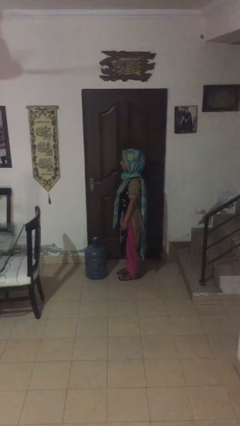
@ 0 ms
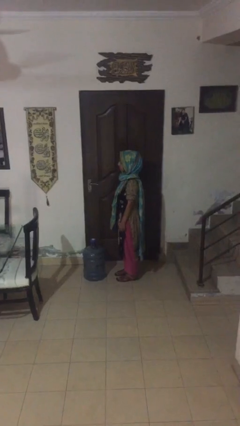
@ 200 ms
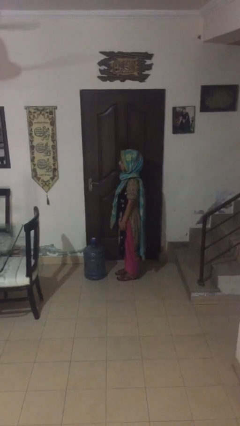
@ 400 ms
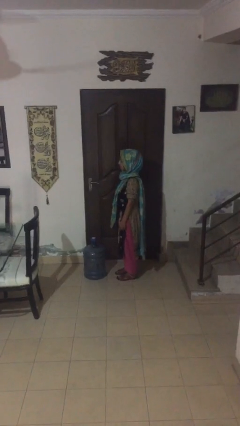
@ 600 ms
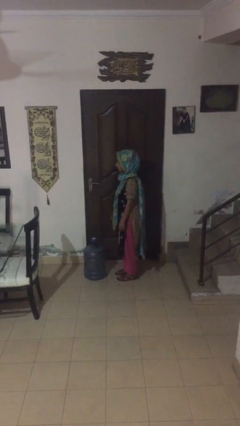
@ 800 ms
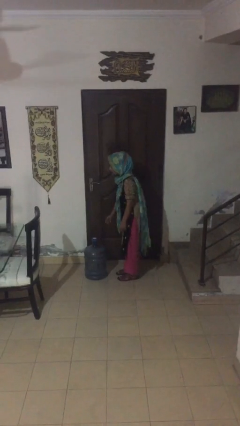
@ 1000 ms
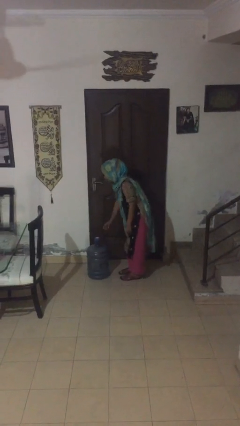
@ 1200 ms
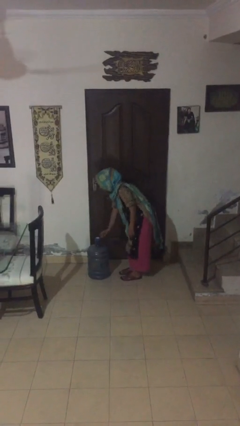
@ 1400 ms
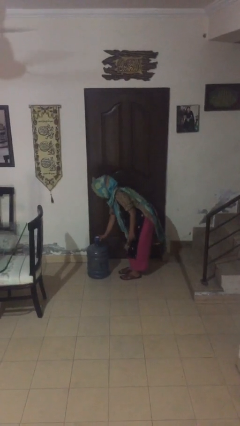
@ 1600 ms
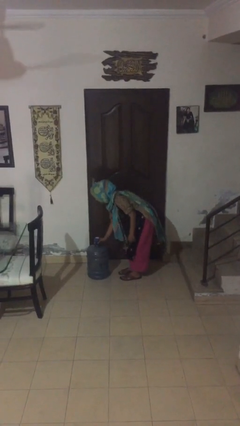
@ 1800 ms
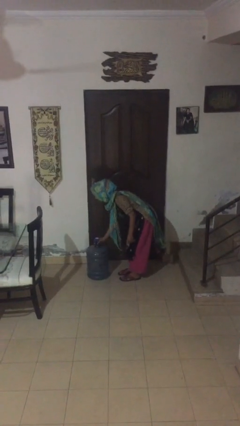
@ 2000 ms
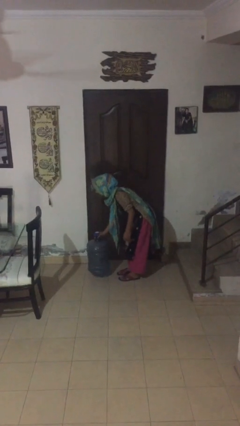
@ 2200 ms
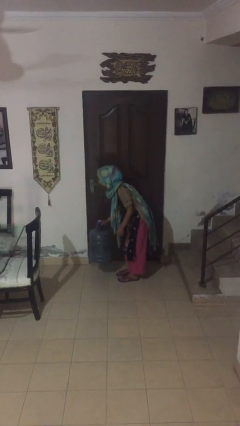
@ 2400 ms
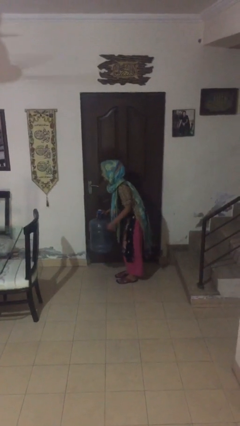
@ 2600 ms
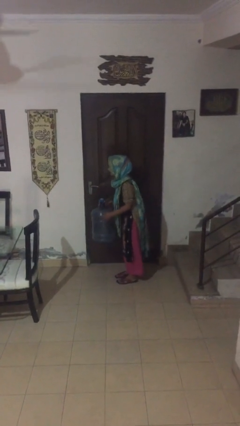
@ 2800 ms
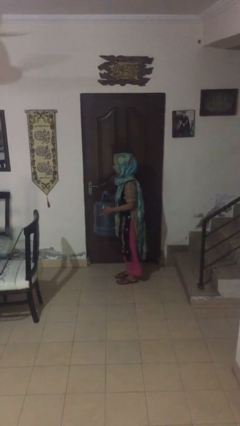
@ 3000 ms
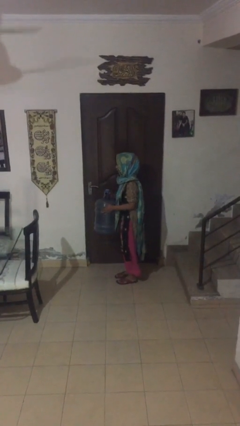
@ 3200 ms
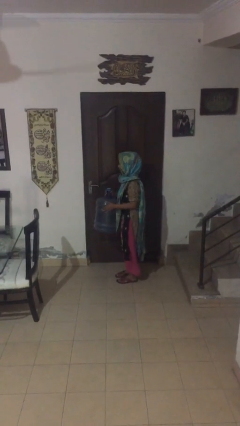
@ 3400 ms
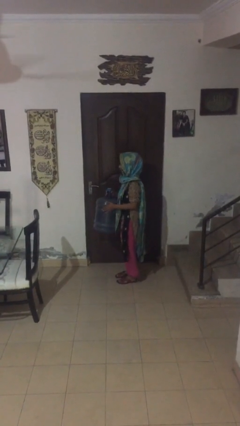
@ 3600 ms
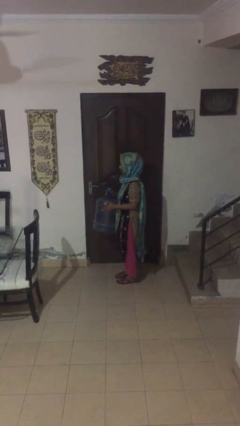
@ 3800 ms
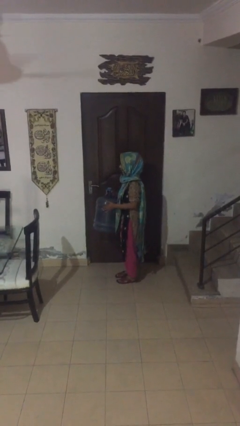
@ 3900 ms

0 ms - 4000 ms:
person carries heavy object

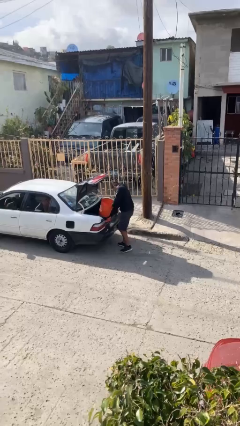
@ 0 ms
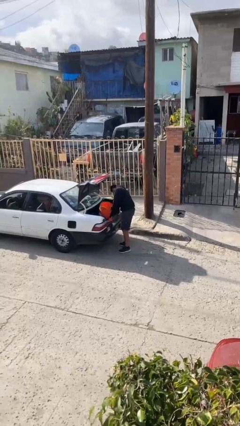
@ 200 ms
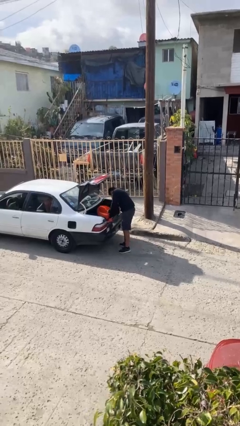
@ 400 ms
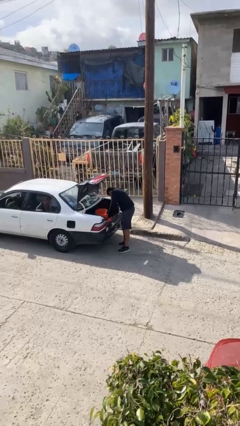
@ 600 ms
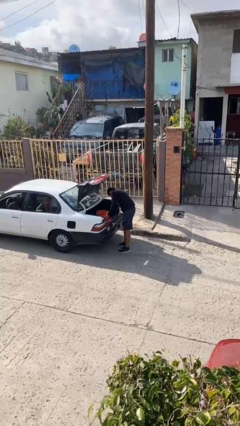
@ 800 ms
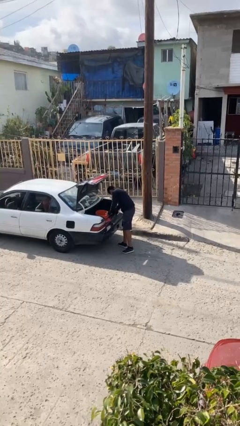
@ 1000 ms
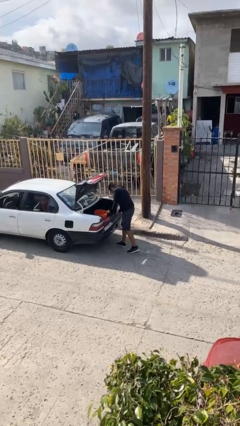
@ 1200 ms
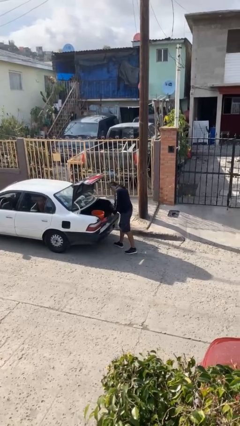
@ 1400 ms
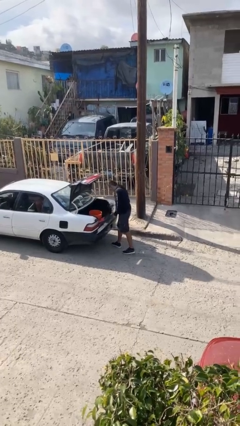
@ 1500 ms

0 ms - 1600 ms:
person loads car

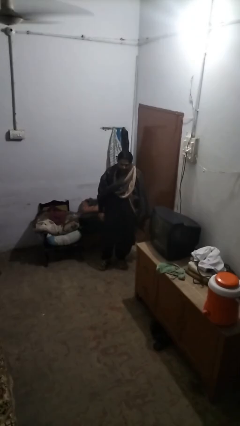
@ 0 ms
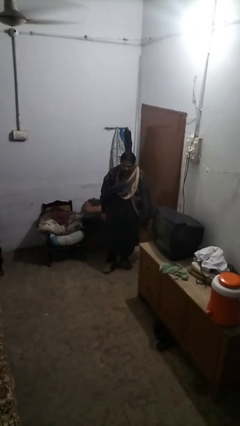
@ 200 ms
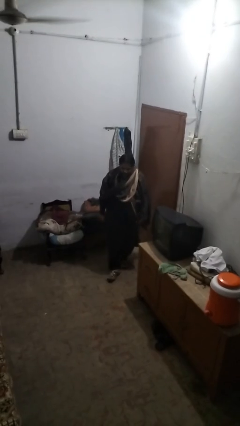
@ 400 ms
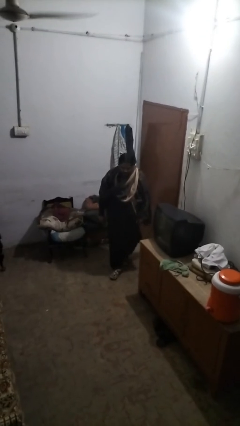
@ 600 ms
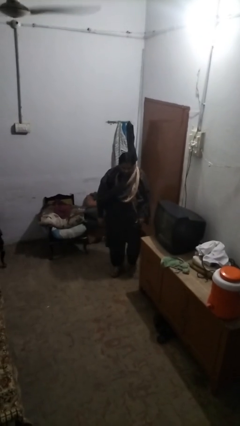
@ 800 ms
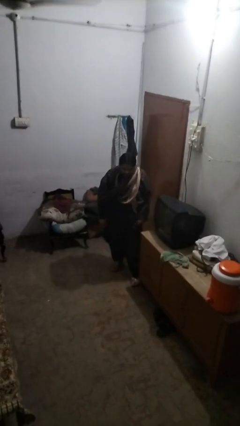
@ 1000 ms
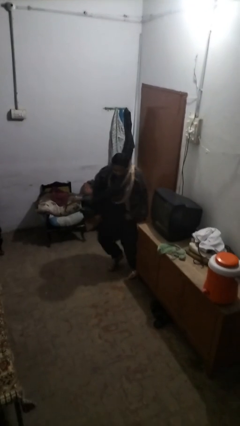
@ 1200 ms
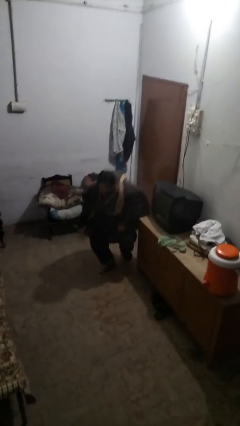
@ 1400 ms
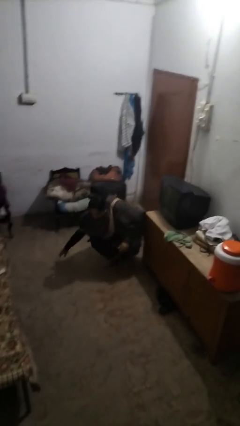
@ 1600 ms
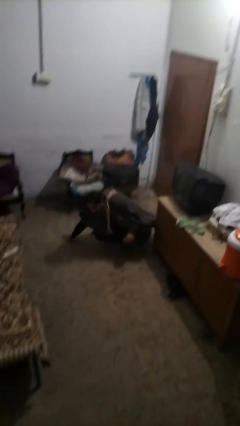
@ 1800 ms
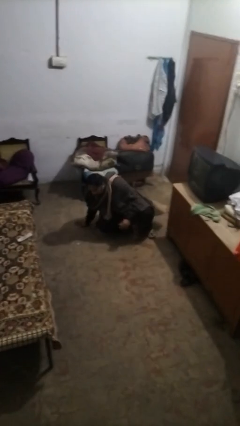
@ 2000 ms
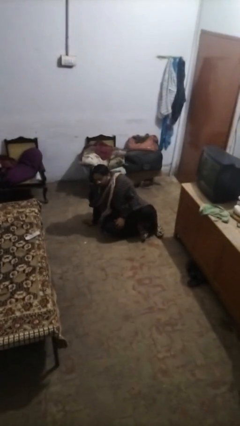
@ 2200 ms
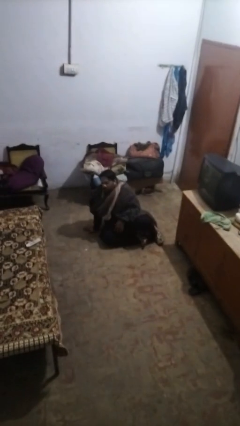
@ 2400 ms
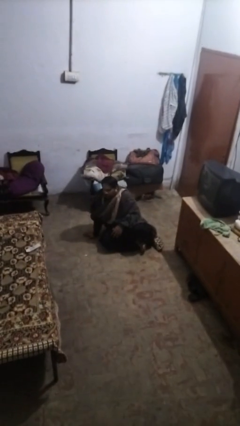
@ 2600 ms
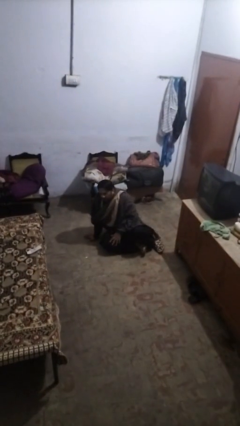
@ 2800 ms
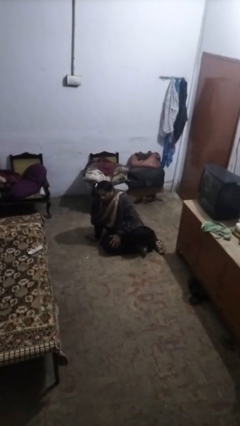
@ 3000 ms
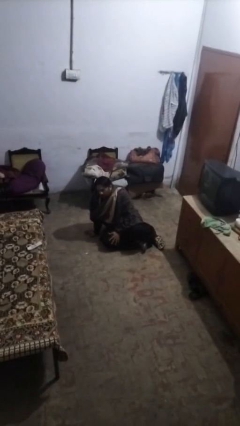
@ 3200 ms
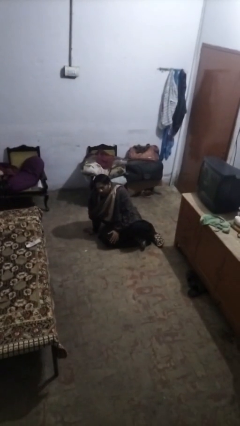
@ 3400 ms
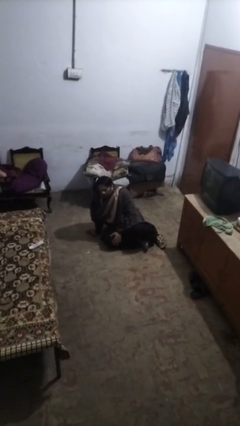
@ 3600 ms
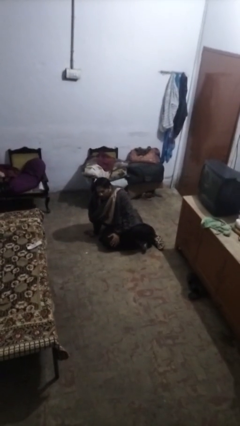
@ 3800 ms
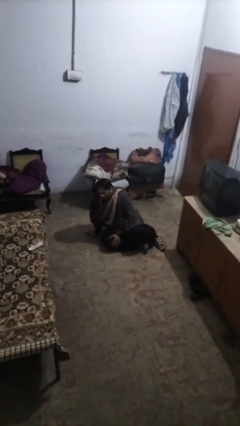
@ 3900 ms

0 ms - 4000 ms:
person trips on object on floor

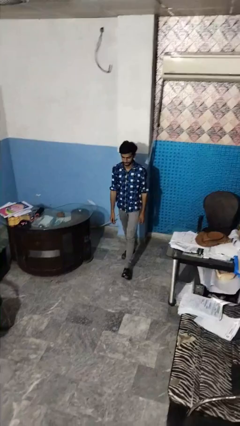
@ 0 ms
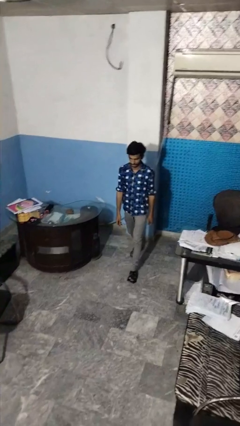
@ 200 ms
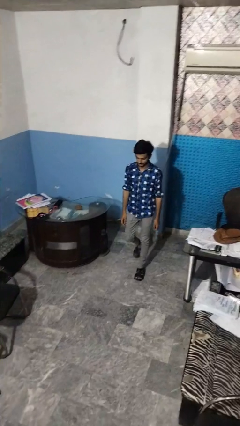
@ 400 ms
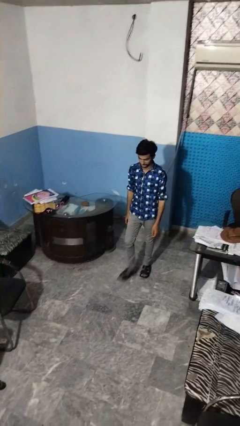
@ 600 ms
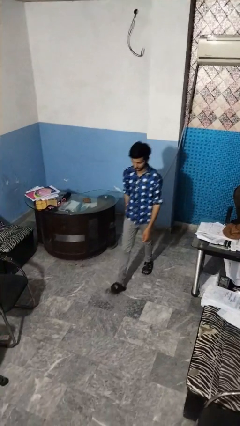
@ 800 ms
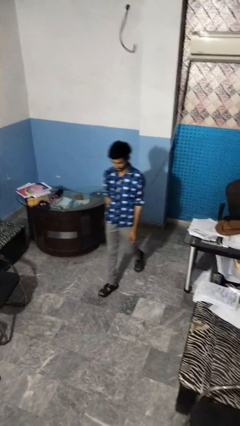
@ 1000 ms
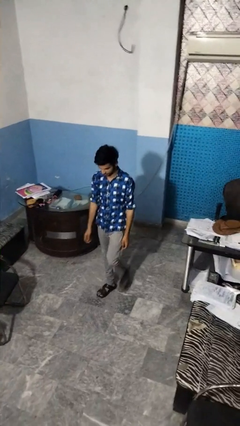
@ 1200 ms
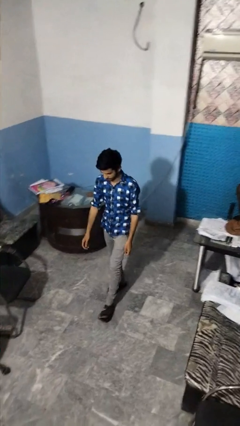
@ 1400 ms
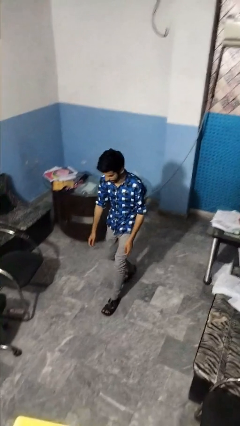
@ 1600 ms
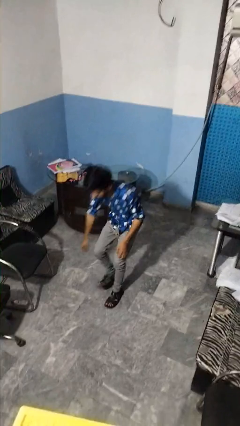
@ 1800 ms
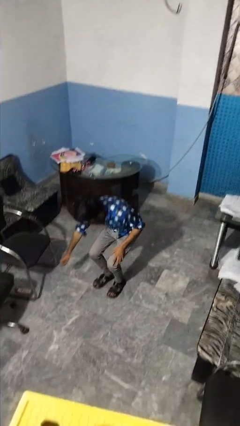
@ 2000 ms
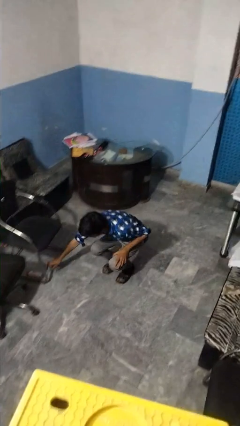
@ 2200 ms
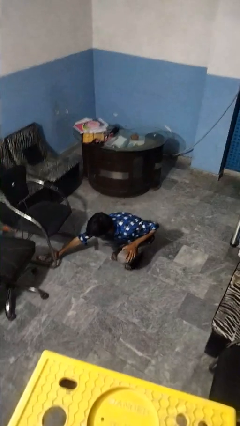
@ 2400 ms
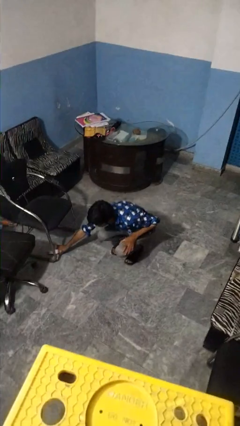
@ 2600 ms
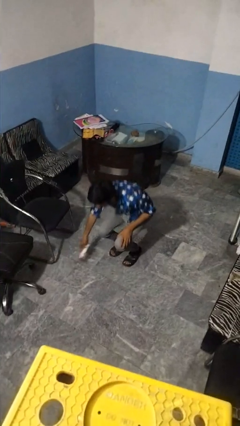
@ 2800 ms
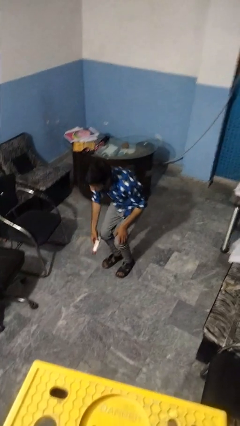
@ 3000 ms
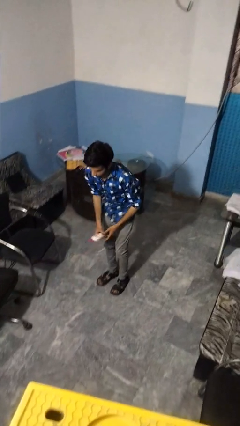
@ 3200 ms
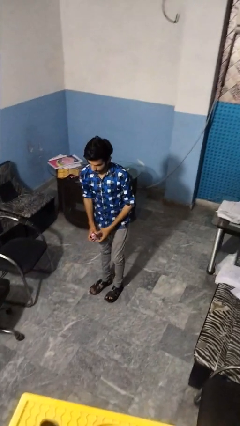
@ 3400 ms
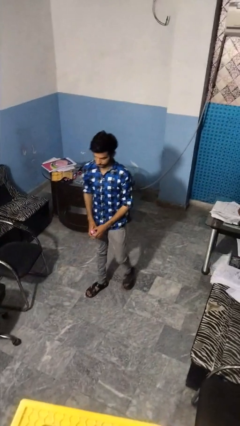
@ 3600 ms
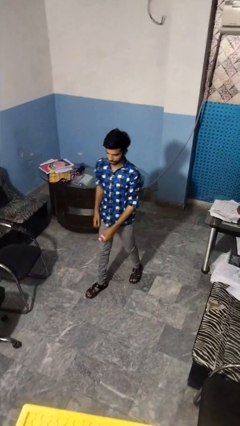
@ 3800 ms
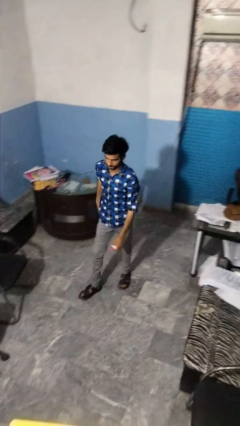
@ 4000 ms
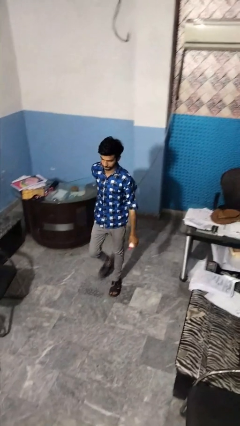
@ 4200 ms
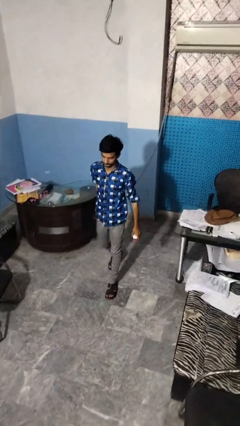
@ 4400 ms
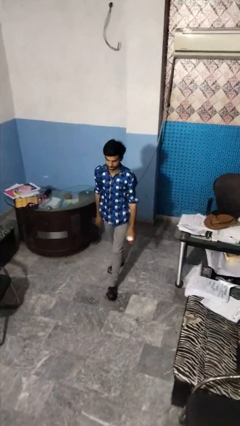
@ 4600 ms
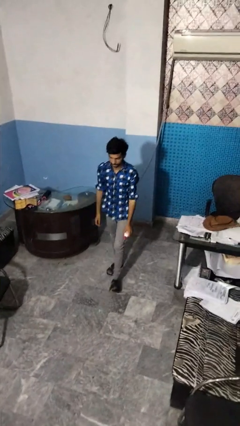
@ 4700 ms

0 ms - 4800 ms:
person picks up object from floor

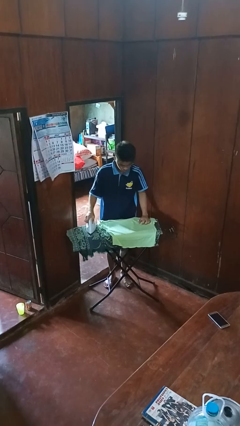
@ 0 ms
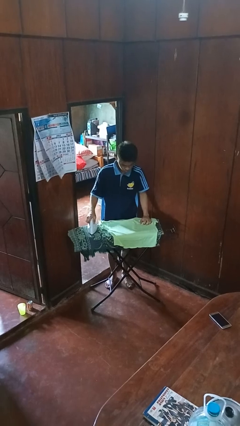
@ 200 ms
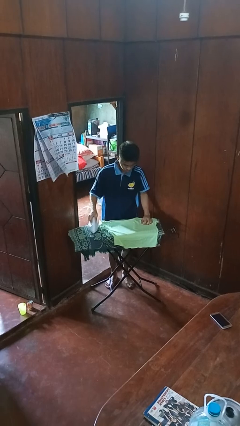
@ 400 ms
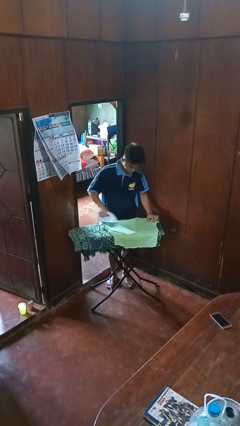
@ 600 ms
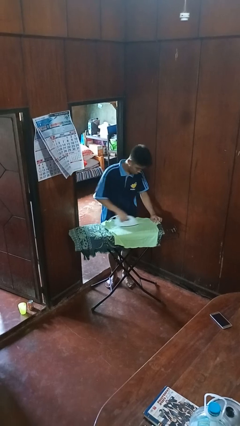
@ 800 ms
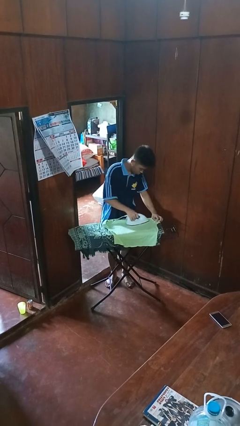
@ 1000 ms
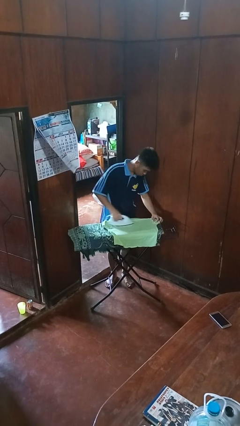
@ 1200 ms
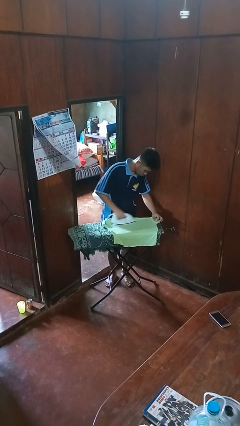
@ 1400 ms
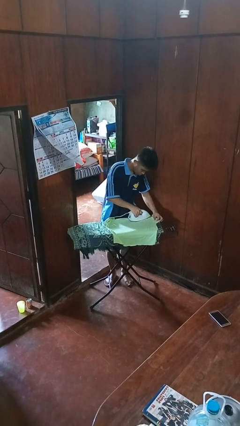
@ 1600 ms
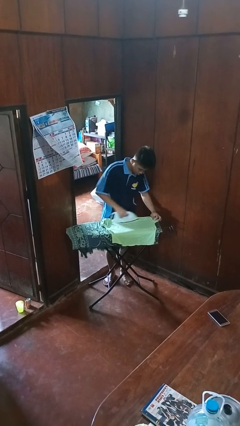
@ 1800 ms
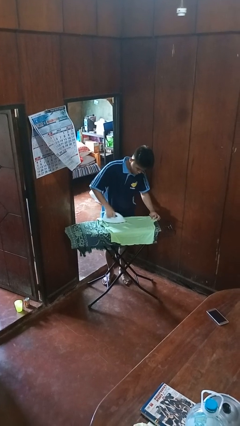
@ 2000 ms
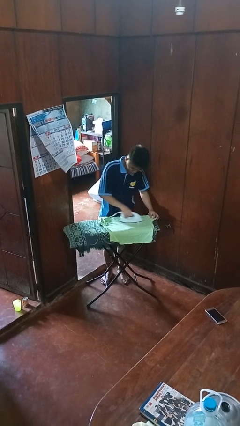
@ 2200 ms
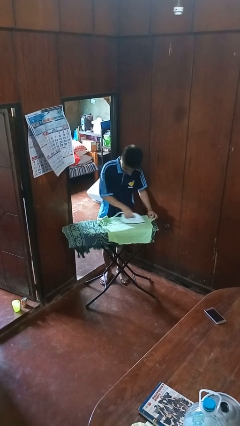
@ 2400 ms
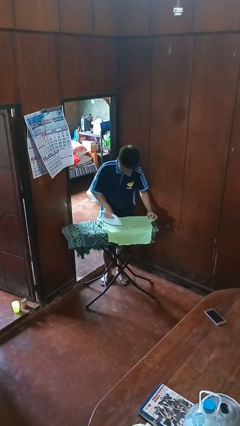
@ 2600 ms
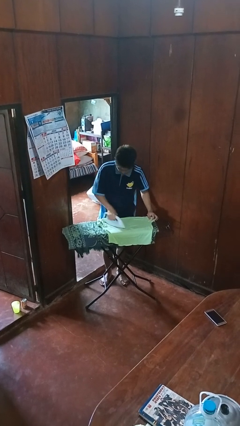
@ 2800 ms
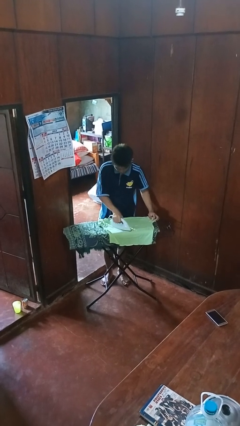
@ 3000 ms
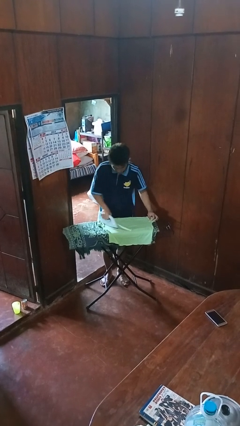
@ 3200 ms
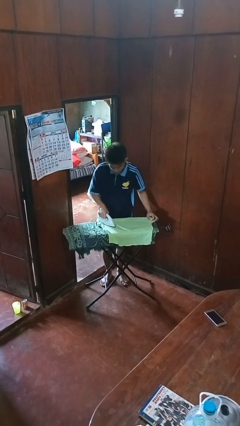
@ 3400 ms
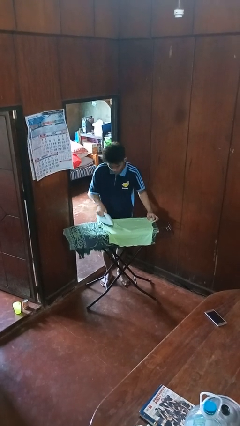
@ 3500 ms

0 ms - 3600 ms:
person irons clothes
